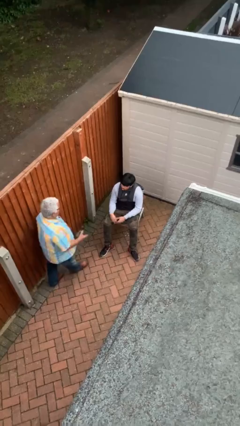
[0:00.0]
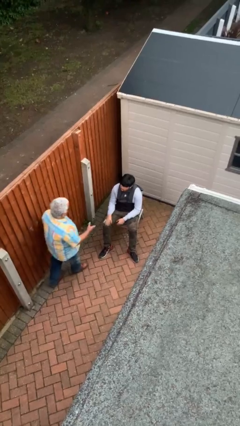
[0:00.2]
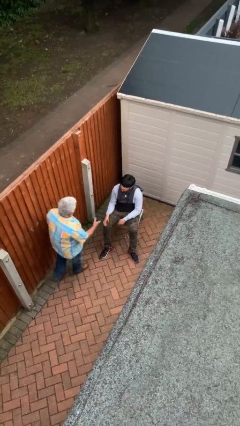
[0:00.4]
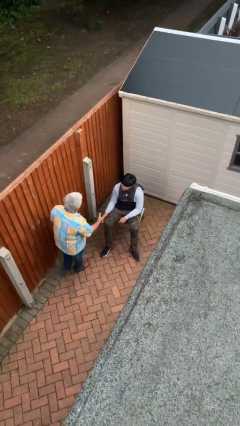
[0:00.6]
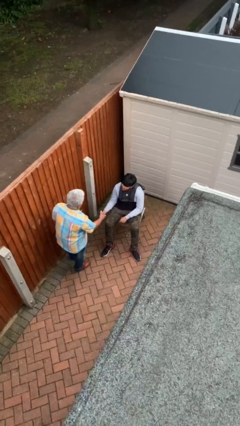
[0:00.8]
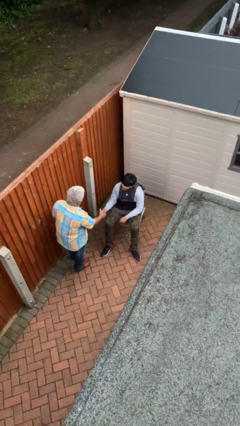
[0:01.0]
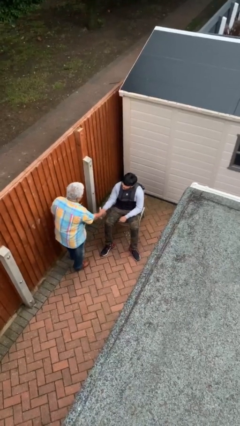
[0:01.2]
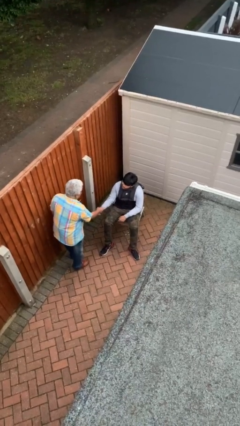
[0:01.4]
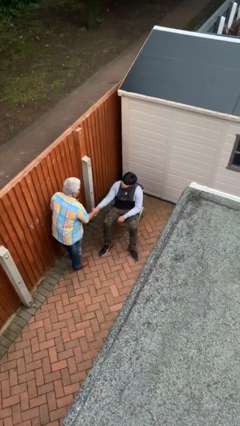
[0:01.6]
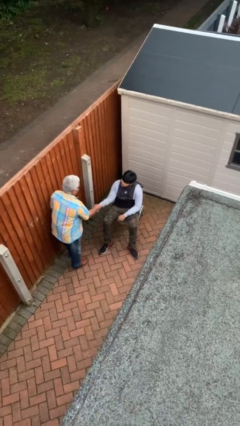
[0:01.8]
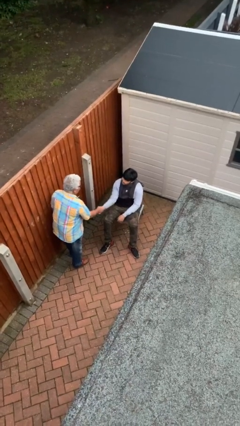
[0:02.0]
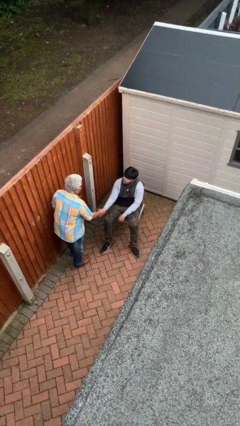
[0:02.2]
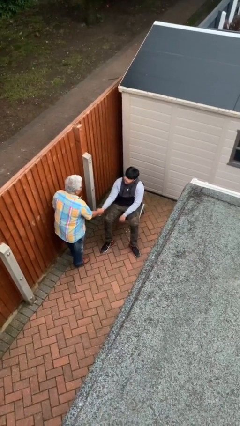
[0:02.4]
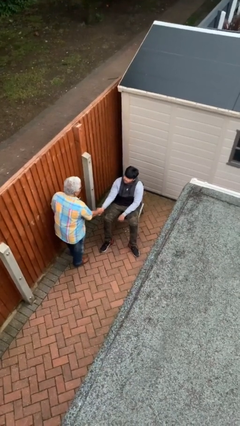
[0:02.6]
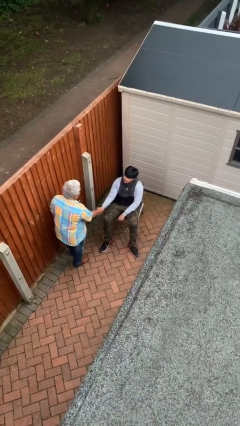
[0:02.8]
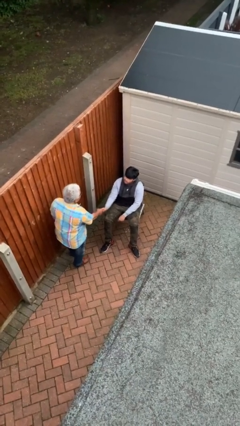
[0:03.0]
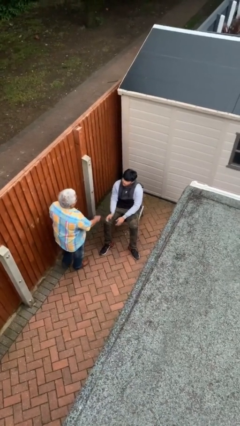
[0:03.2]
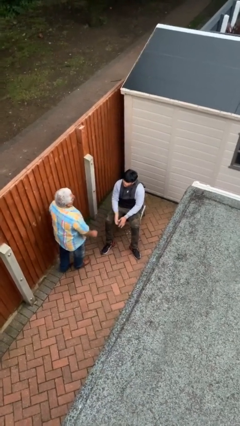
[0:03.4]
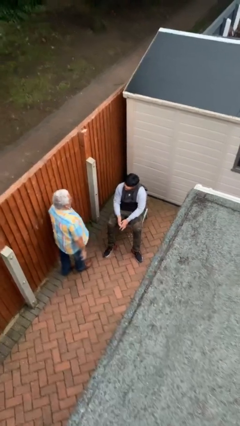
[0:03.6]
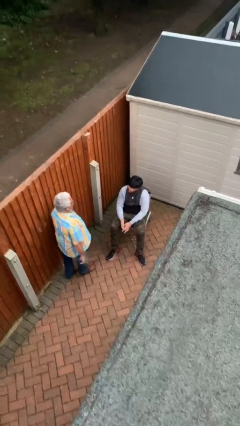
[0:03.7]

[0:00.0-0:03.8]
person shakes hand

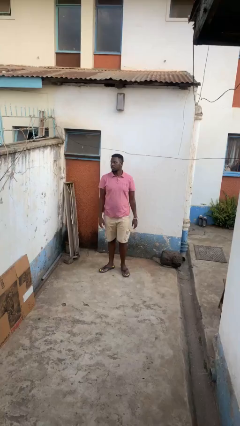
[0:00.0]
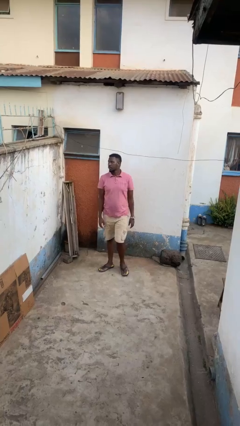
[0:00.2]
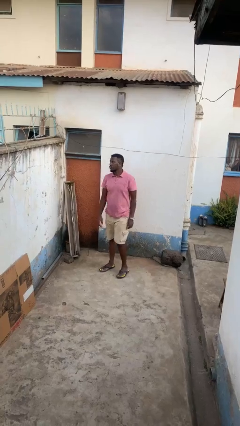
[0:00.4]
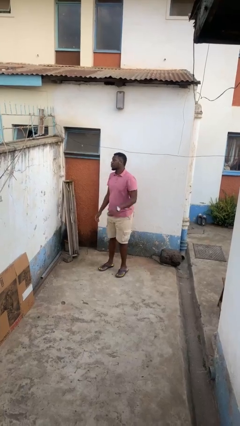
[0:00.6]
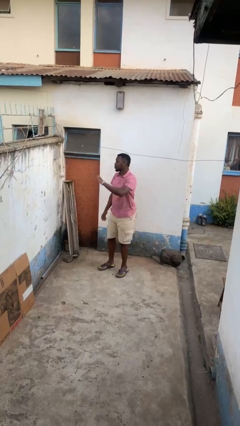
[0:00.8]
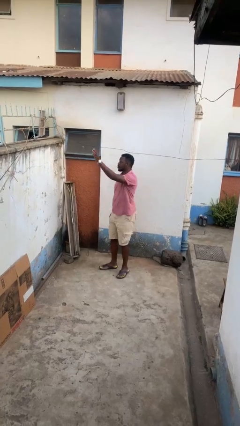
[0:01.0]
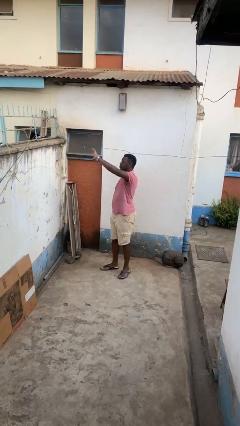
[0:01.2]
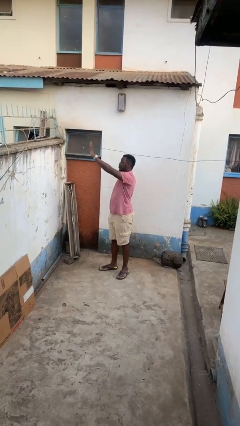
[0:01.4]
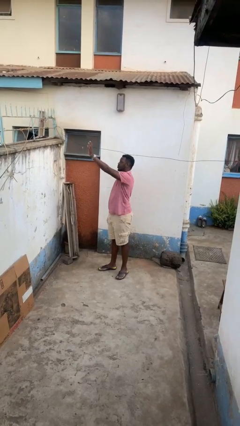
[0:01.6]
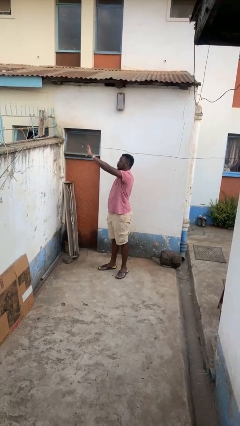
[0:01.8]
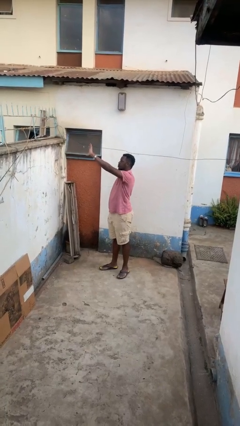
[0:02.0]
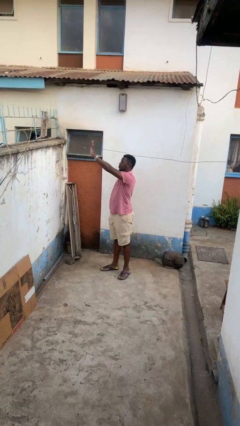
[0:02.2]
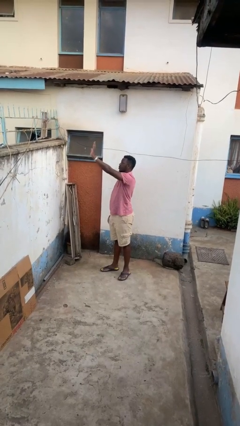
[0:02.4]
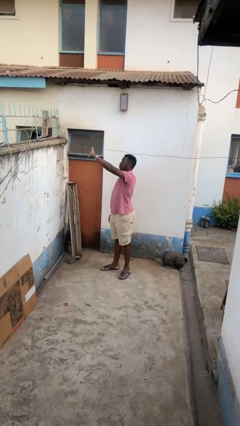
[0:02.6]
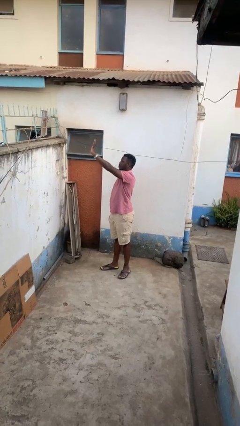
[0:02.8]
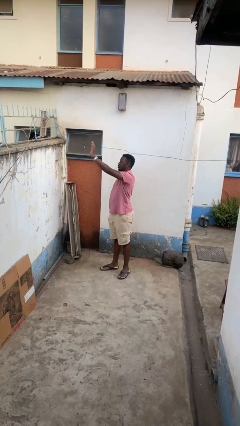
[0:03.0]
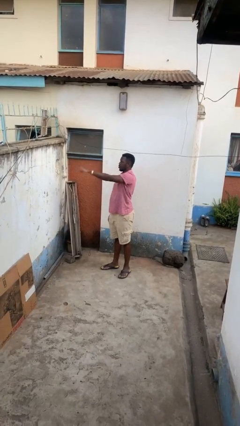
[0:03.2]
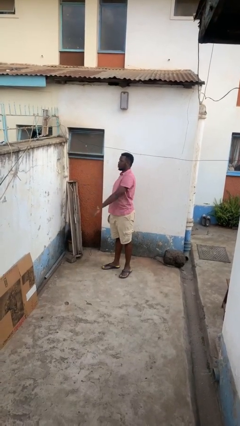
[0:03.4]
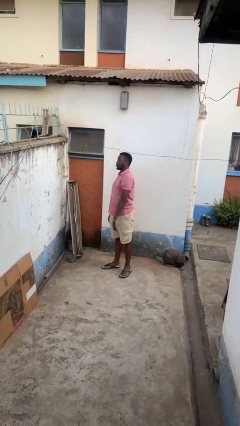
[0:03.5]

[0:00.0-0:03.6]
person waves at person

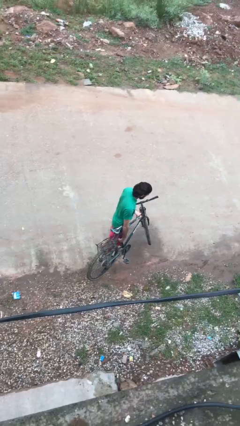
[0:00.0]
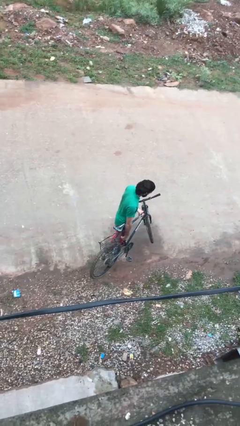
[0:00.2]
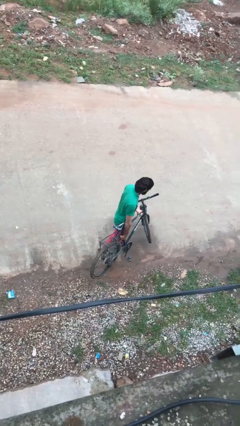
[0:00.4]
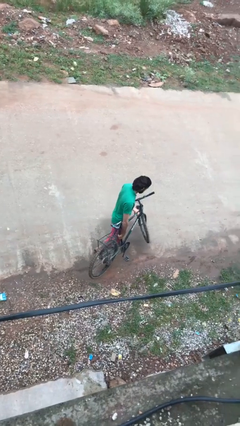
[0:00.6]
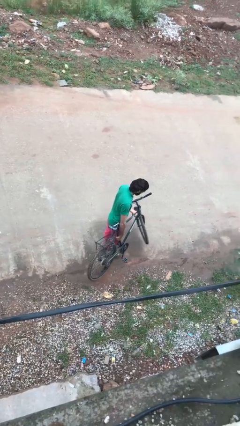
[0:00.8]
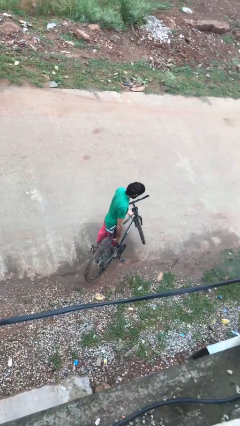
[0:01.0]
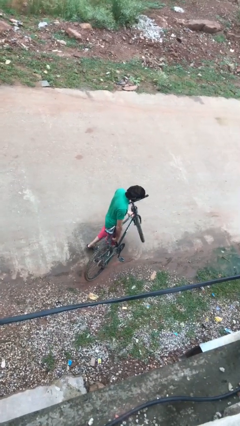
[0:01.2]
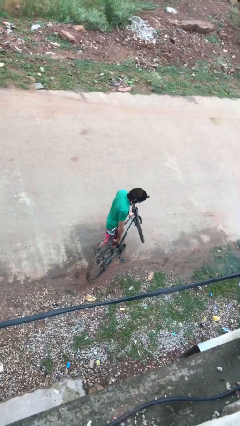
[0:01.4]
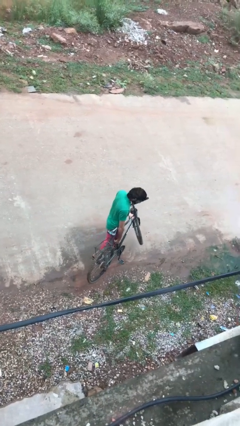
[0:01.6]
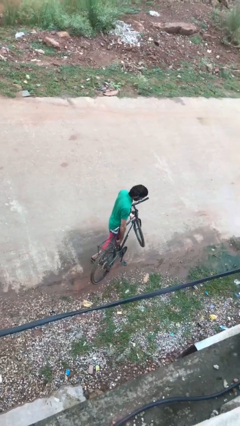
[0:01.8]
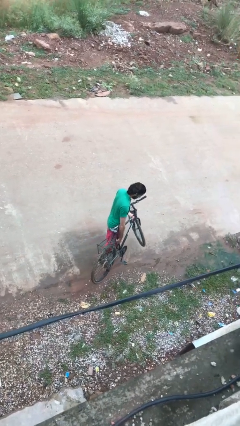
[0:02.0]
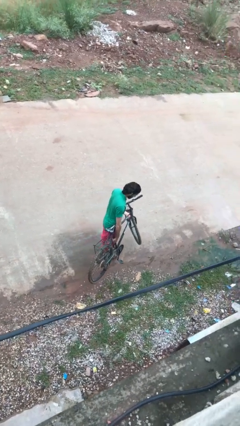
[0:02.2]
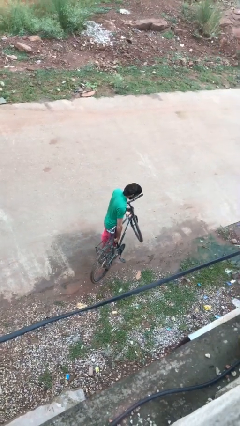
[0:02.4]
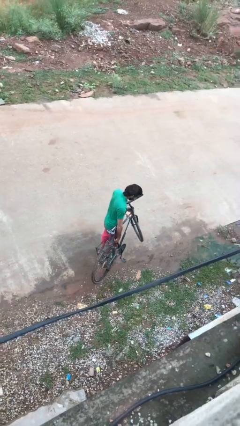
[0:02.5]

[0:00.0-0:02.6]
person carries bicycle

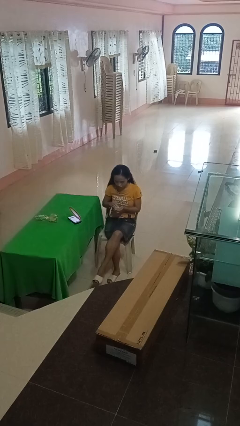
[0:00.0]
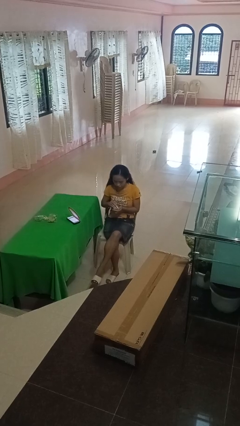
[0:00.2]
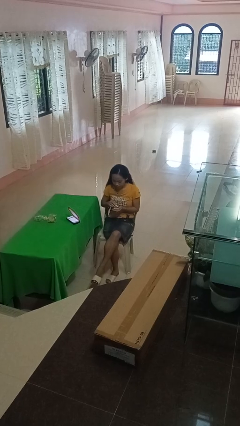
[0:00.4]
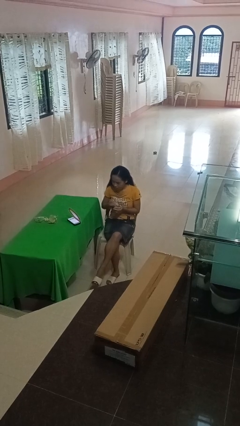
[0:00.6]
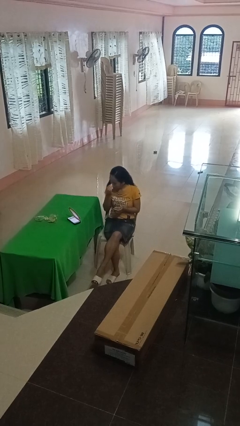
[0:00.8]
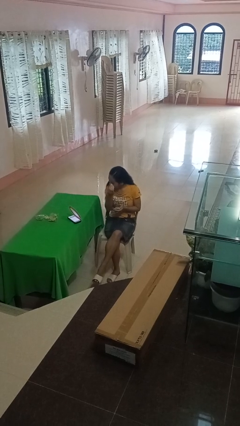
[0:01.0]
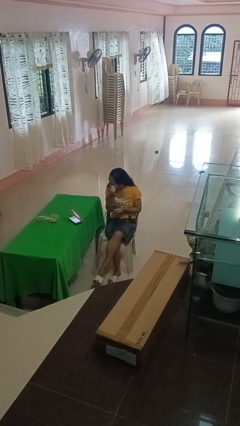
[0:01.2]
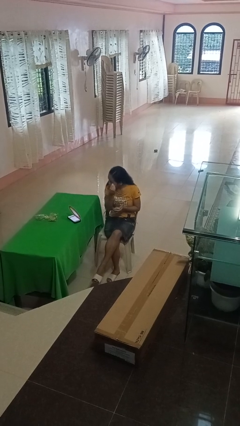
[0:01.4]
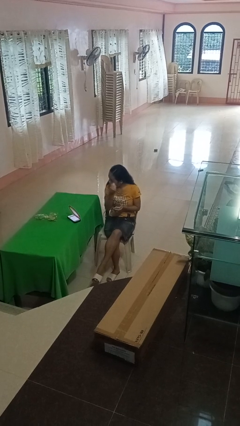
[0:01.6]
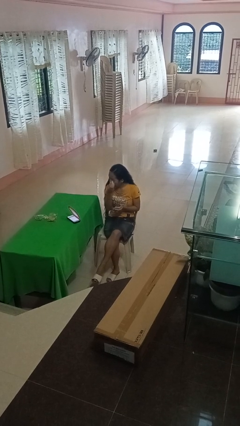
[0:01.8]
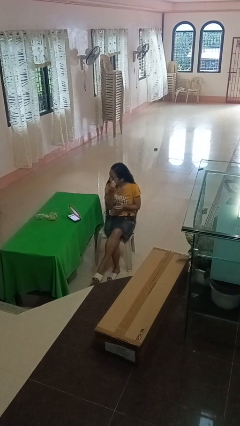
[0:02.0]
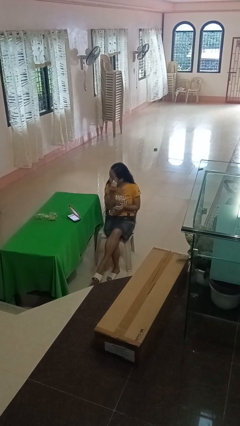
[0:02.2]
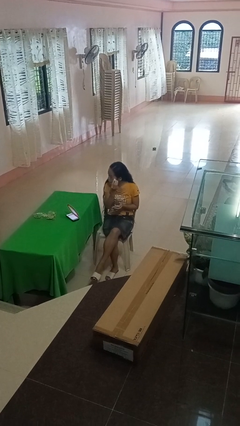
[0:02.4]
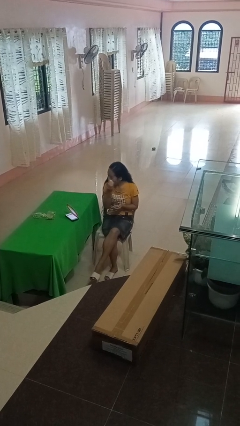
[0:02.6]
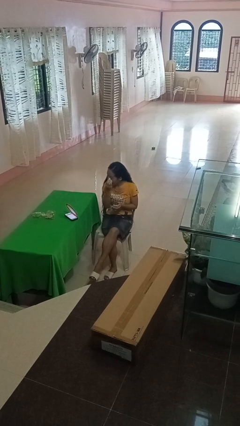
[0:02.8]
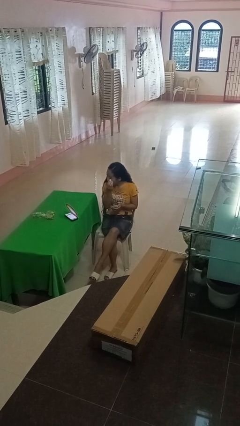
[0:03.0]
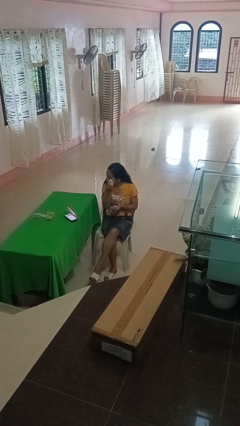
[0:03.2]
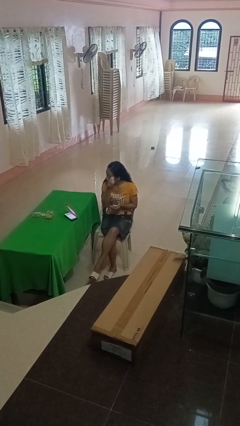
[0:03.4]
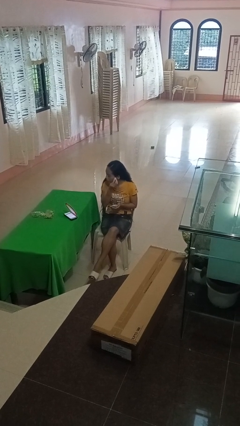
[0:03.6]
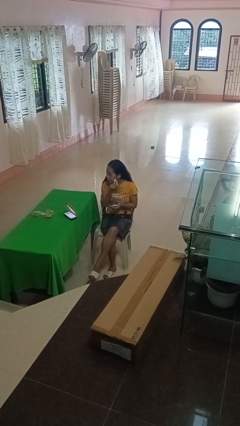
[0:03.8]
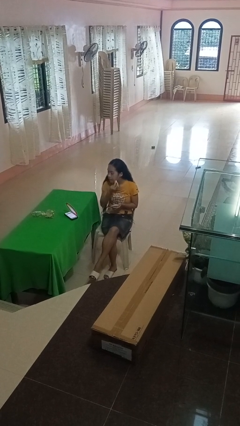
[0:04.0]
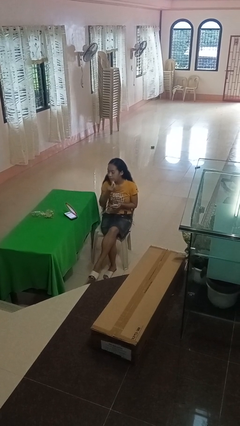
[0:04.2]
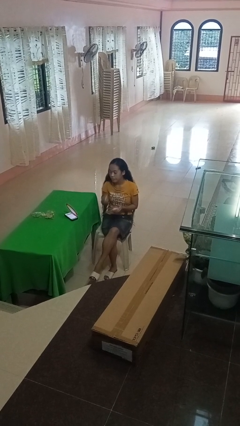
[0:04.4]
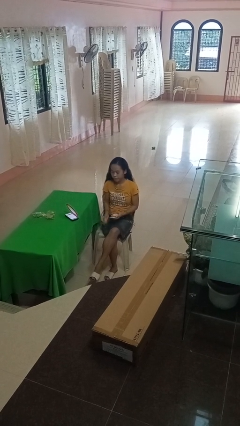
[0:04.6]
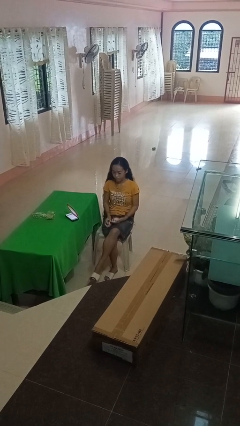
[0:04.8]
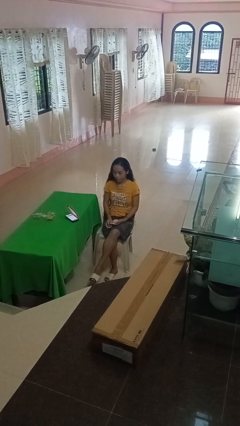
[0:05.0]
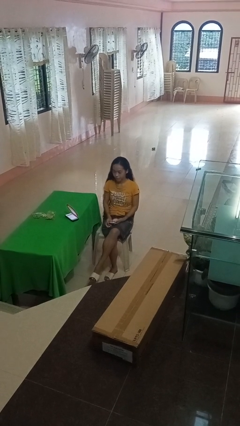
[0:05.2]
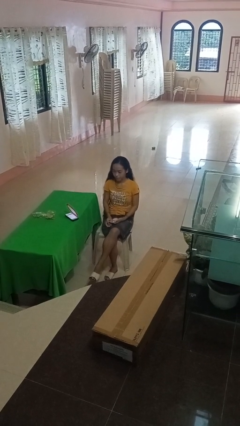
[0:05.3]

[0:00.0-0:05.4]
person applies foundation makeup

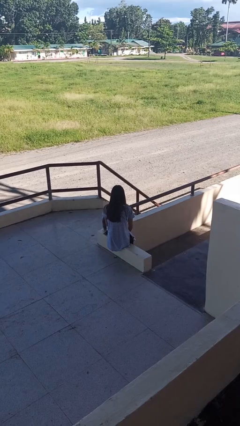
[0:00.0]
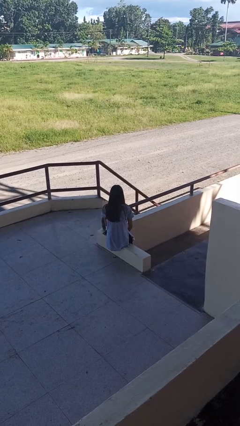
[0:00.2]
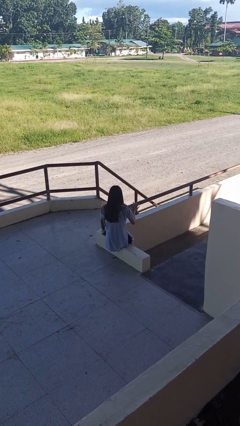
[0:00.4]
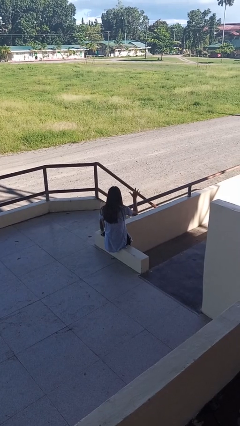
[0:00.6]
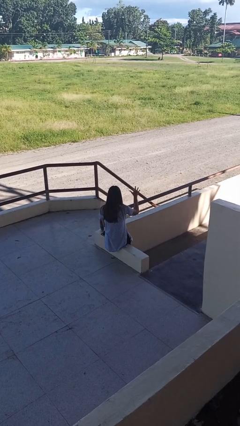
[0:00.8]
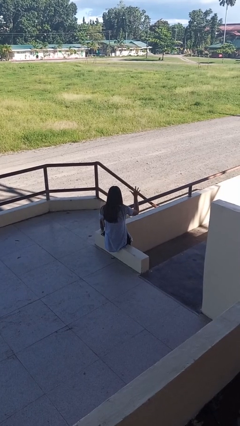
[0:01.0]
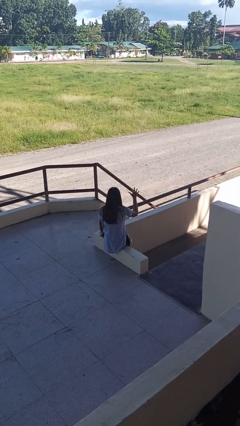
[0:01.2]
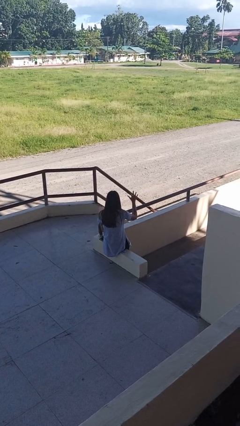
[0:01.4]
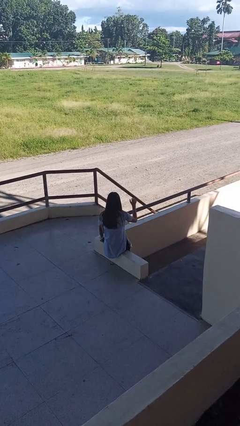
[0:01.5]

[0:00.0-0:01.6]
person gestures number five

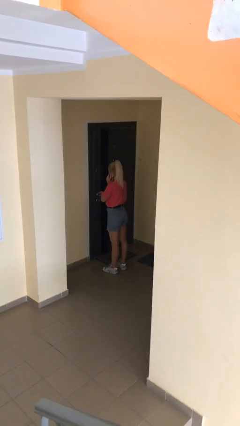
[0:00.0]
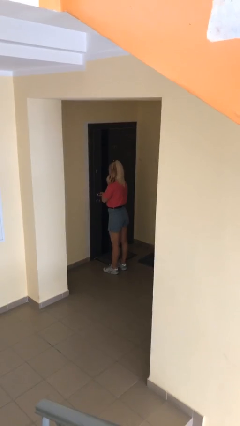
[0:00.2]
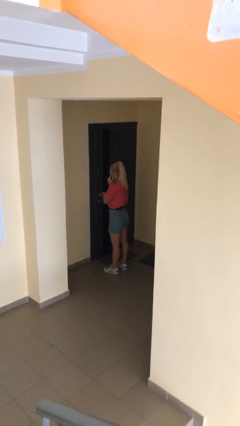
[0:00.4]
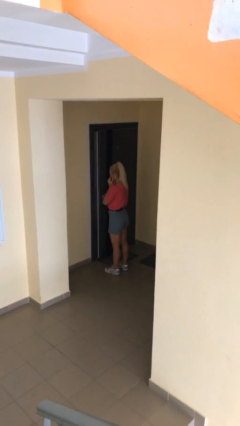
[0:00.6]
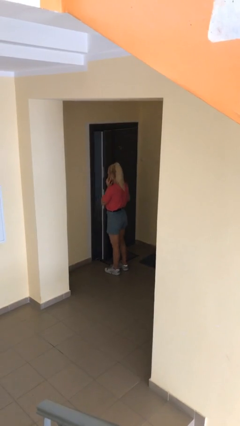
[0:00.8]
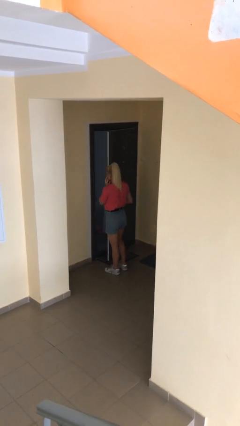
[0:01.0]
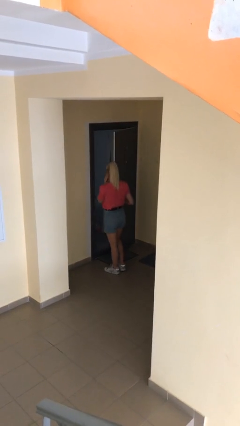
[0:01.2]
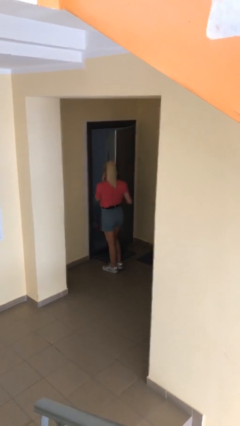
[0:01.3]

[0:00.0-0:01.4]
person opens facility door
